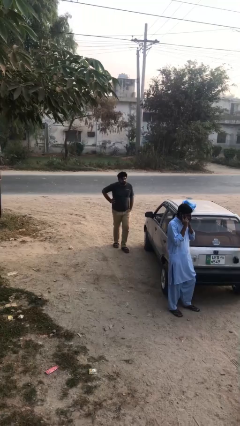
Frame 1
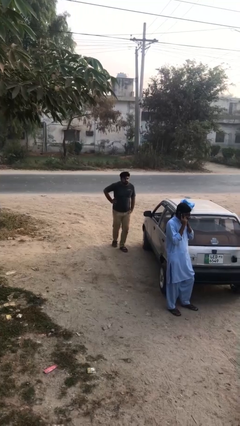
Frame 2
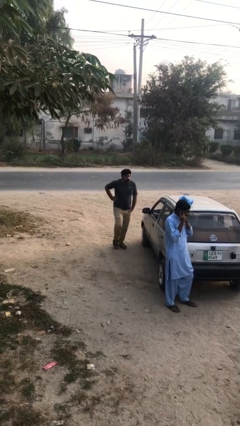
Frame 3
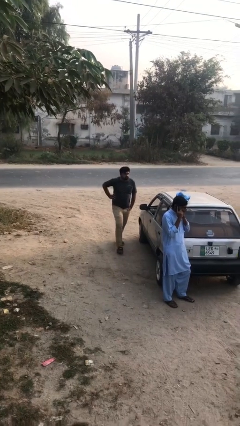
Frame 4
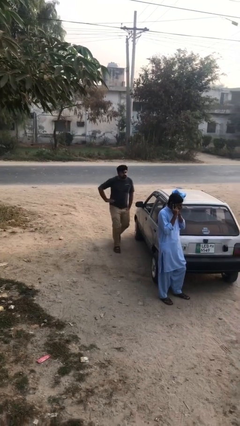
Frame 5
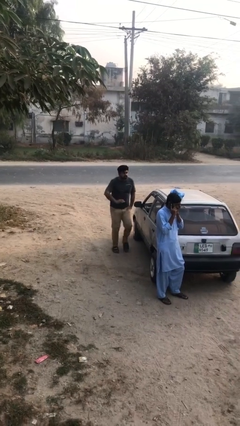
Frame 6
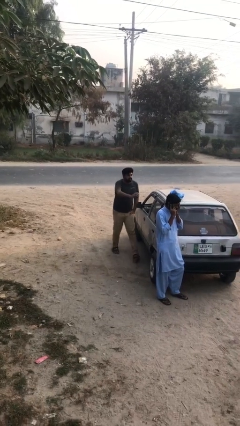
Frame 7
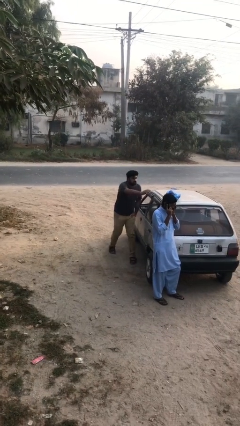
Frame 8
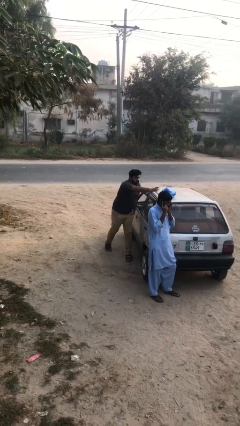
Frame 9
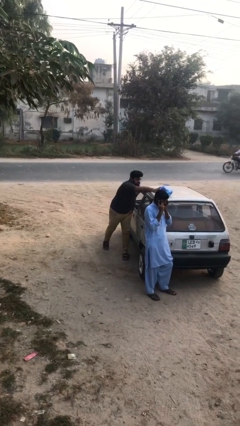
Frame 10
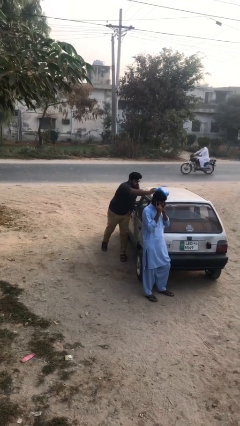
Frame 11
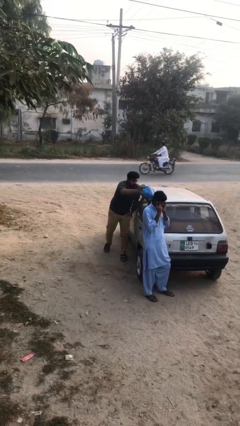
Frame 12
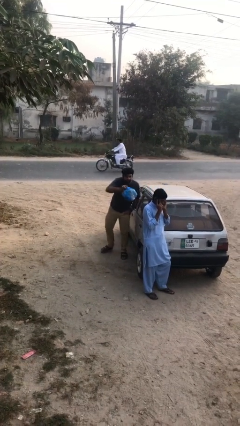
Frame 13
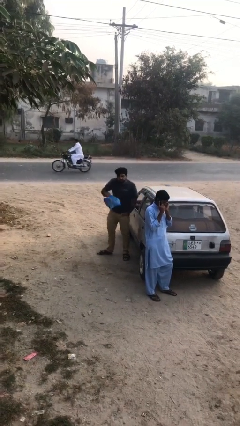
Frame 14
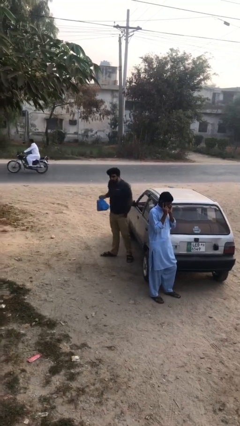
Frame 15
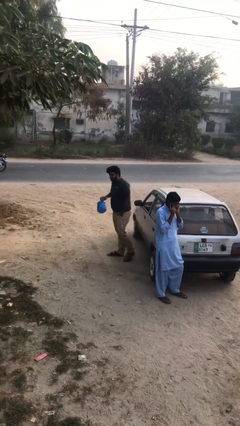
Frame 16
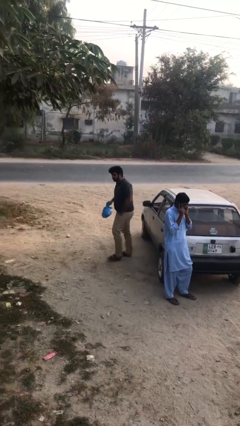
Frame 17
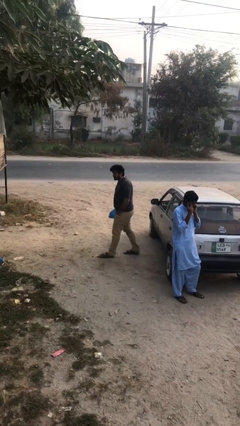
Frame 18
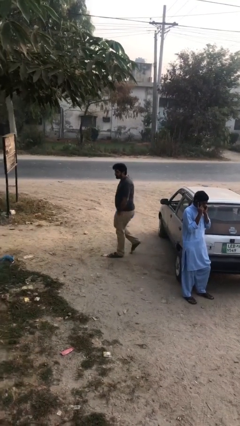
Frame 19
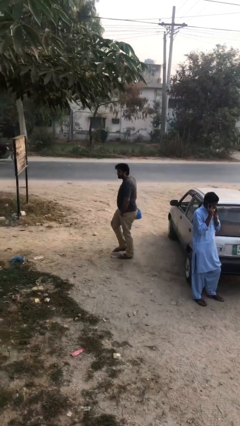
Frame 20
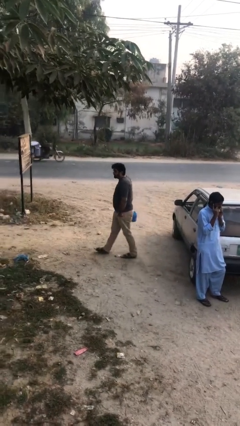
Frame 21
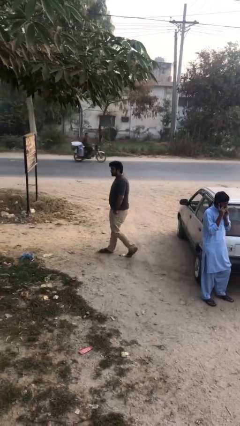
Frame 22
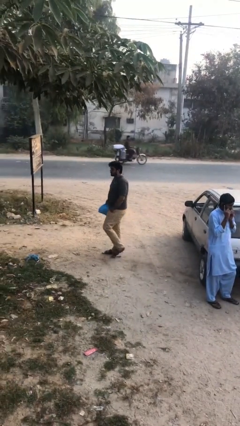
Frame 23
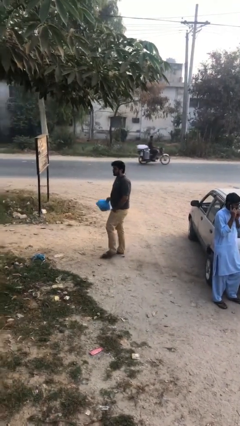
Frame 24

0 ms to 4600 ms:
person steals object from person

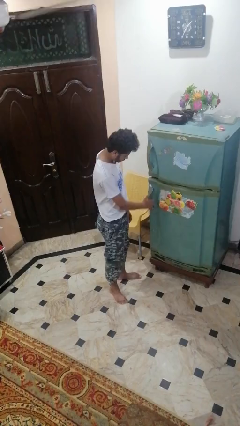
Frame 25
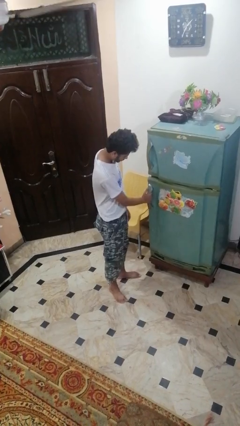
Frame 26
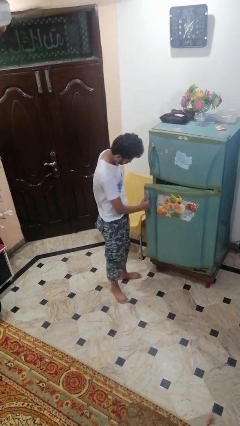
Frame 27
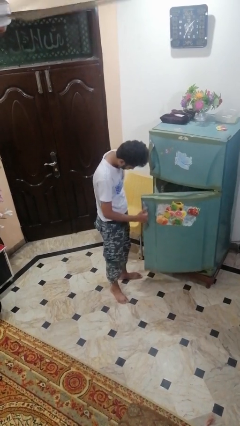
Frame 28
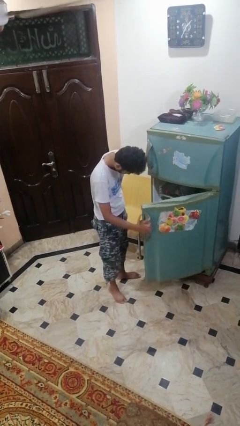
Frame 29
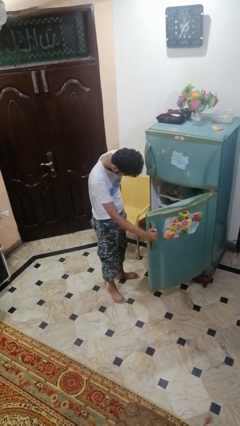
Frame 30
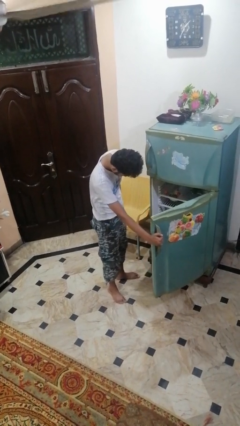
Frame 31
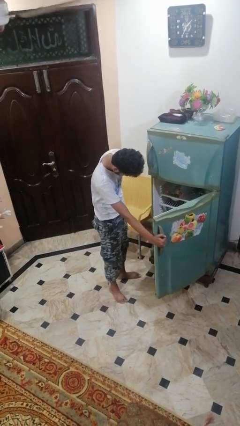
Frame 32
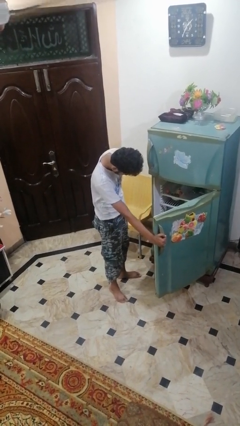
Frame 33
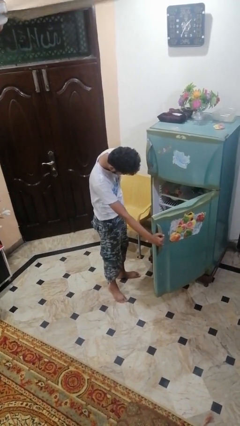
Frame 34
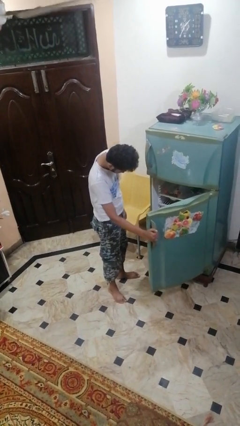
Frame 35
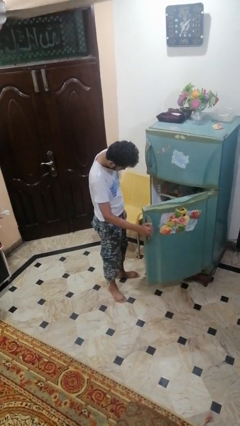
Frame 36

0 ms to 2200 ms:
person opens refrigerator

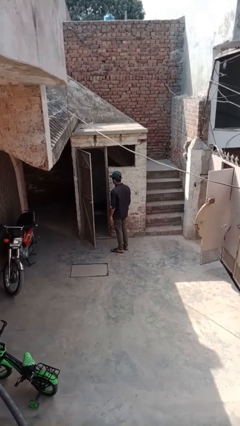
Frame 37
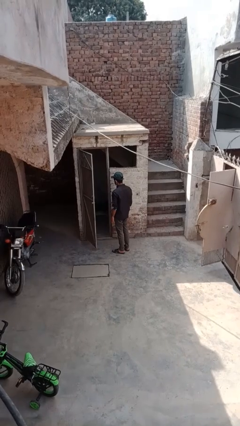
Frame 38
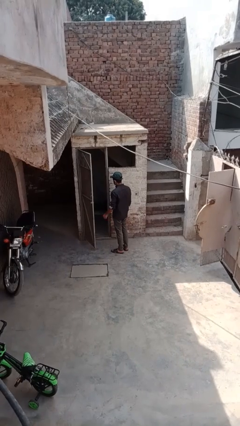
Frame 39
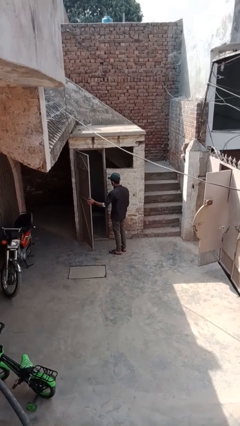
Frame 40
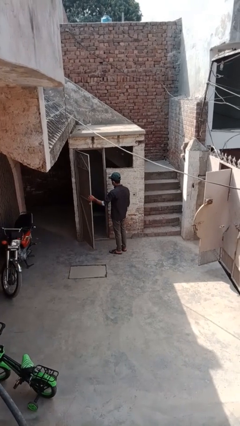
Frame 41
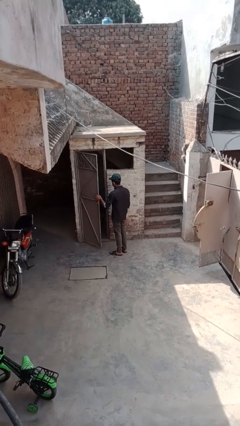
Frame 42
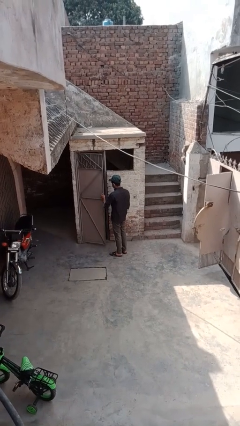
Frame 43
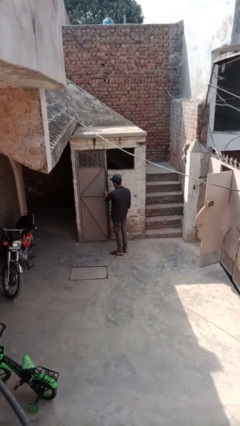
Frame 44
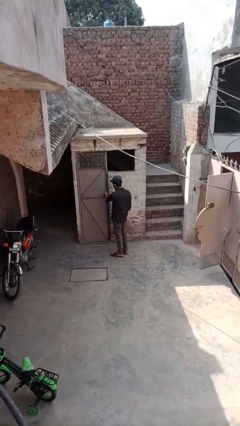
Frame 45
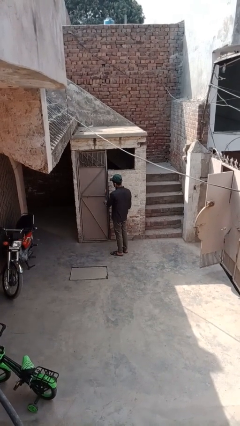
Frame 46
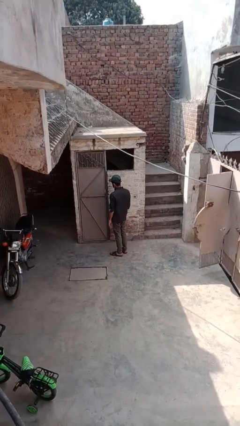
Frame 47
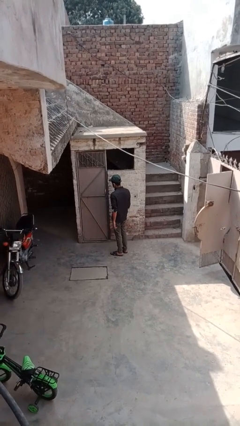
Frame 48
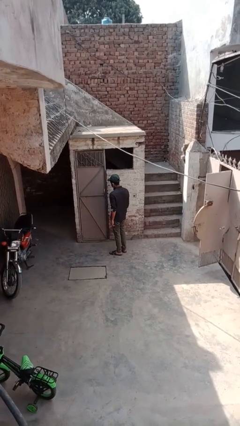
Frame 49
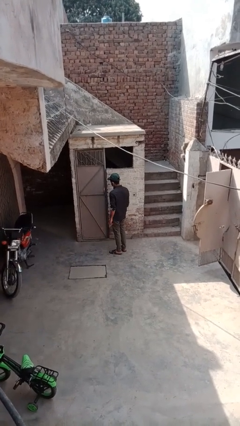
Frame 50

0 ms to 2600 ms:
person closes facility door

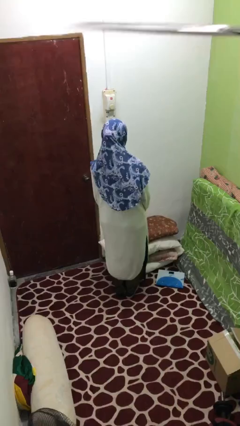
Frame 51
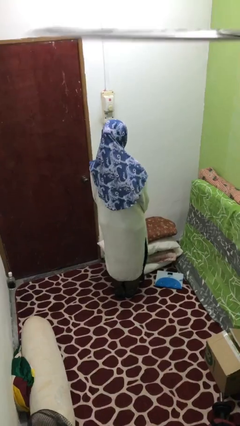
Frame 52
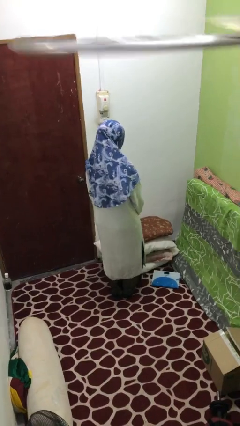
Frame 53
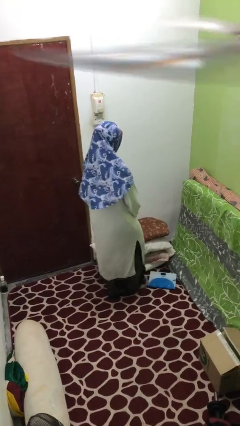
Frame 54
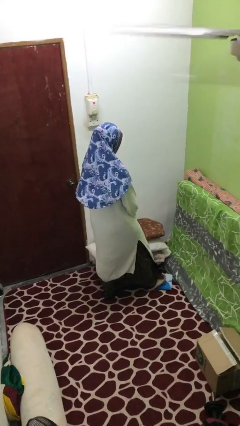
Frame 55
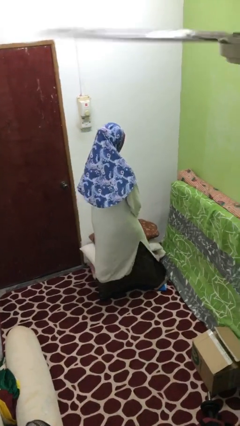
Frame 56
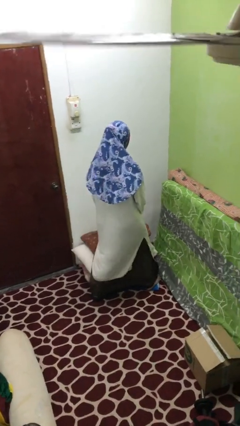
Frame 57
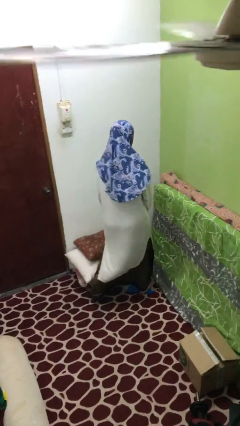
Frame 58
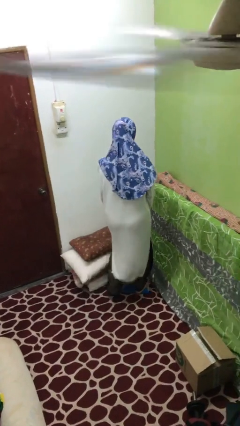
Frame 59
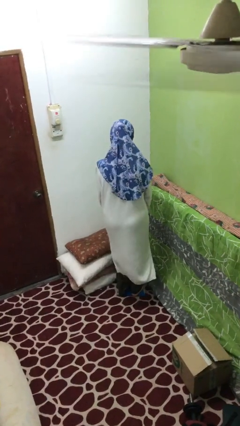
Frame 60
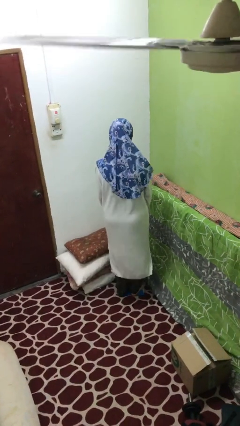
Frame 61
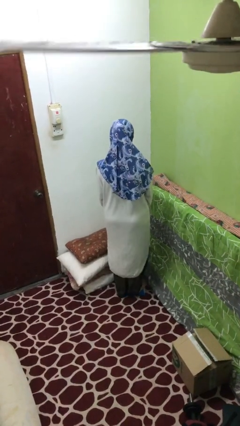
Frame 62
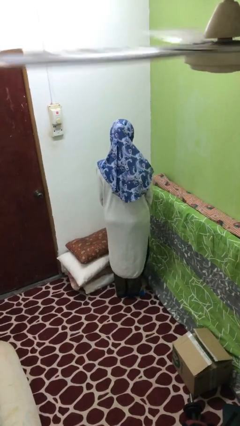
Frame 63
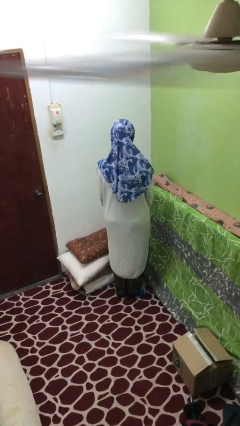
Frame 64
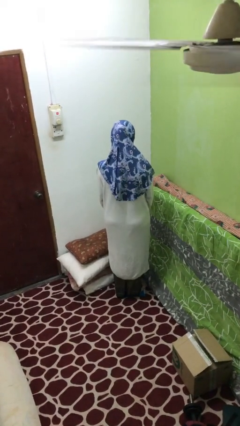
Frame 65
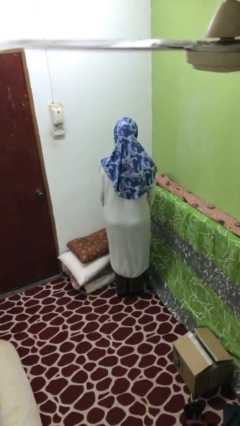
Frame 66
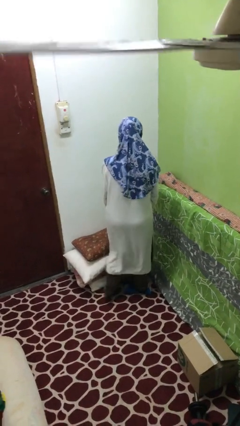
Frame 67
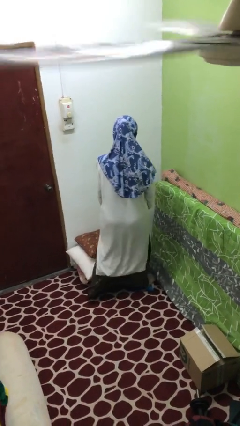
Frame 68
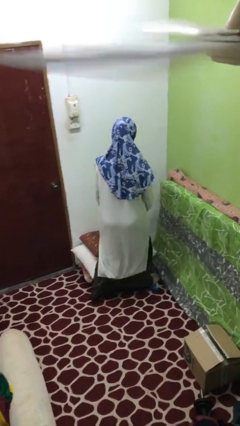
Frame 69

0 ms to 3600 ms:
person uses bodyweight scale

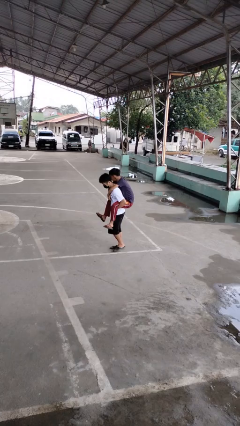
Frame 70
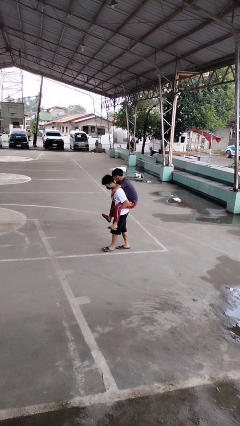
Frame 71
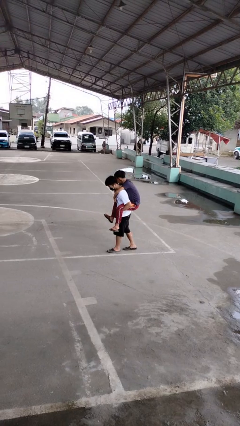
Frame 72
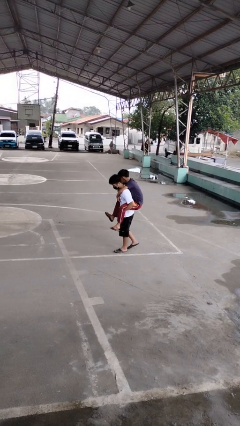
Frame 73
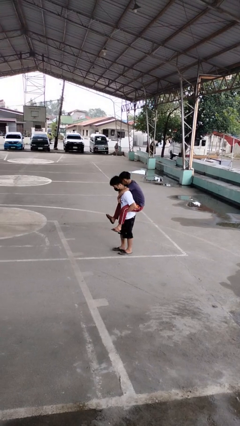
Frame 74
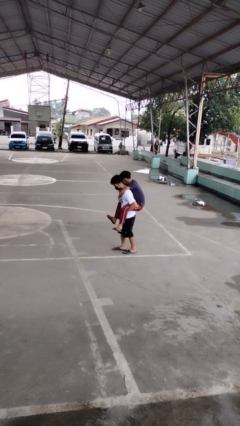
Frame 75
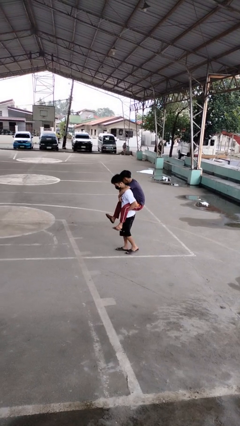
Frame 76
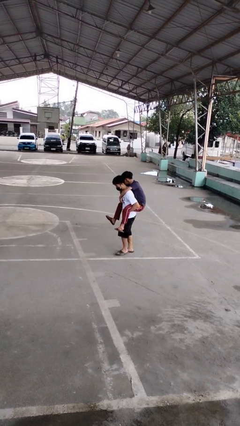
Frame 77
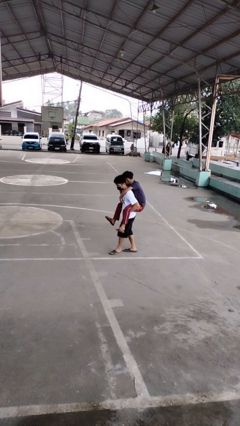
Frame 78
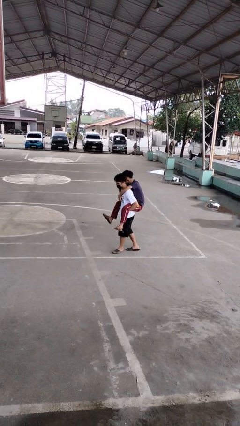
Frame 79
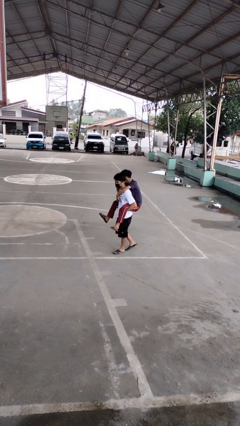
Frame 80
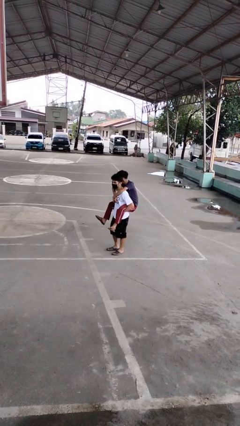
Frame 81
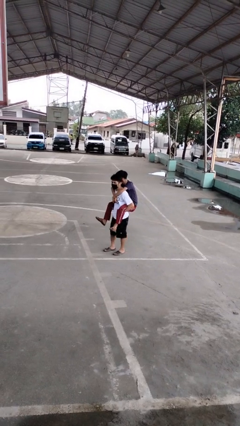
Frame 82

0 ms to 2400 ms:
person carries person on back

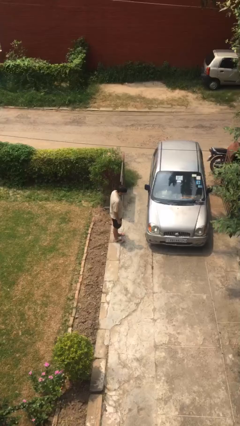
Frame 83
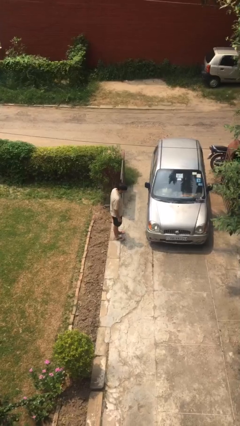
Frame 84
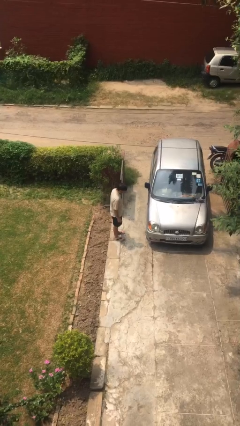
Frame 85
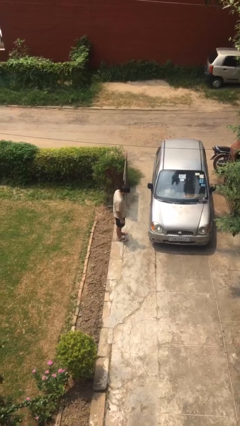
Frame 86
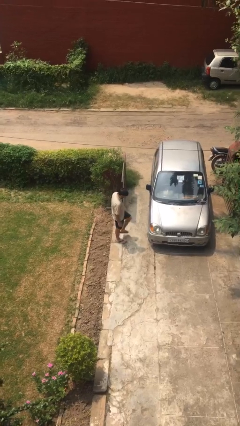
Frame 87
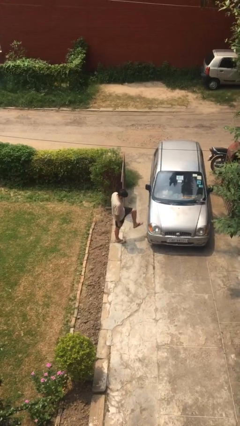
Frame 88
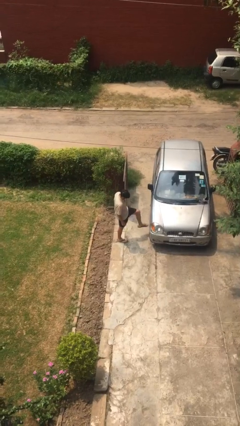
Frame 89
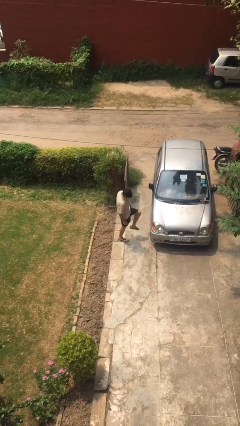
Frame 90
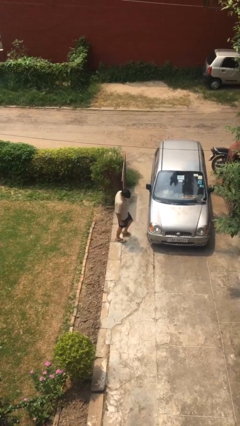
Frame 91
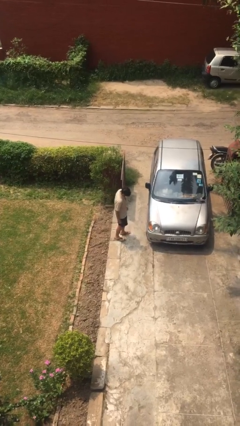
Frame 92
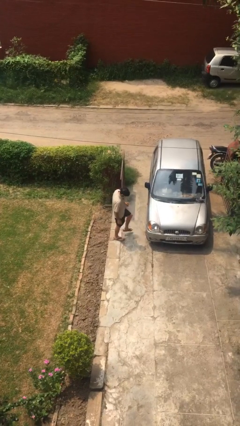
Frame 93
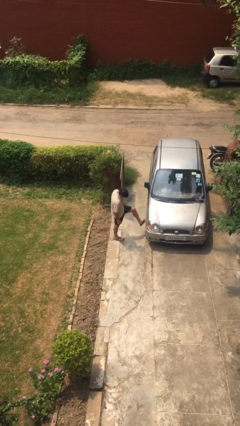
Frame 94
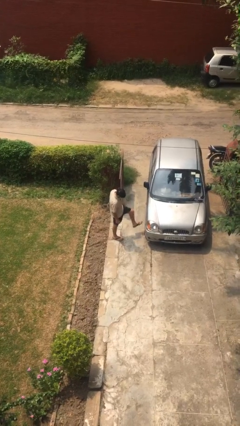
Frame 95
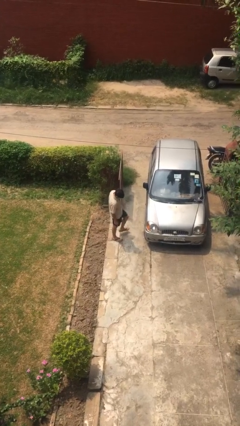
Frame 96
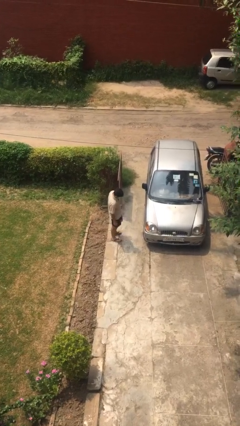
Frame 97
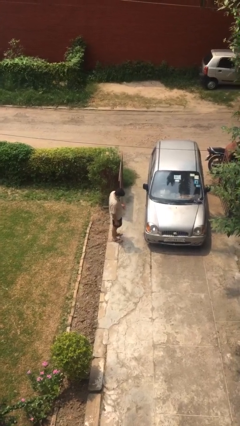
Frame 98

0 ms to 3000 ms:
person kicks car tires
